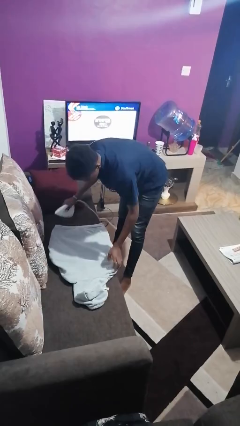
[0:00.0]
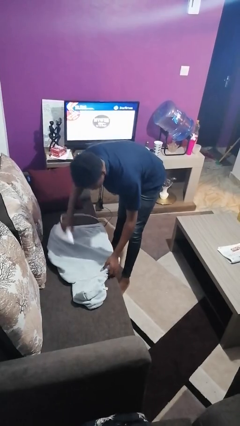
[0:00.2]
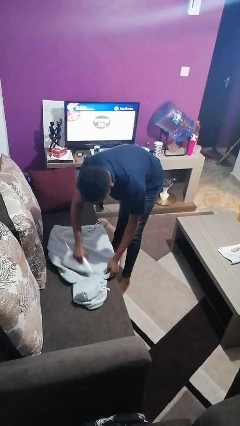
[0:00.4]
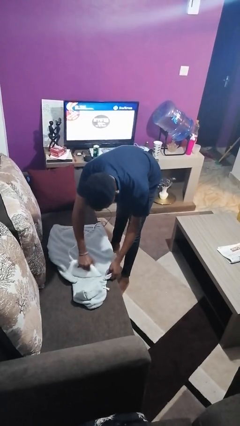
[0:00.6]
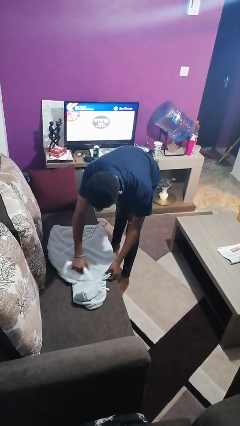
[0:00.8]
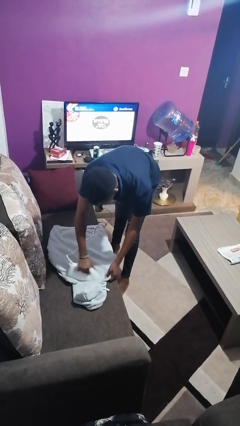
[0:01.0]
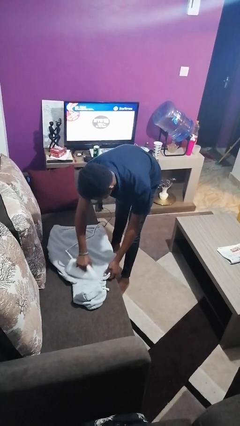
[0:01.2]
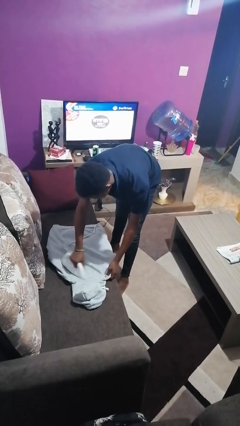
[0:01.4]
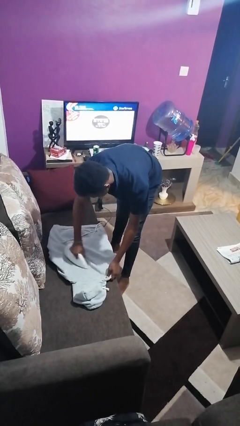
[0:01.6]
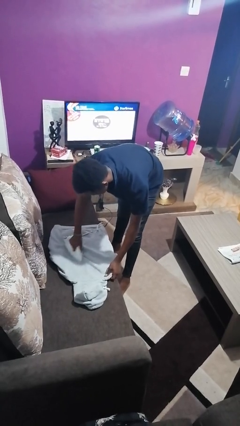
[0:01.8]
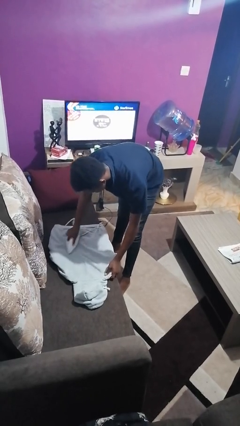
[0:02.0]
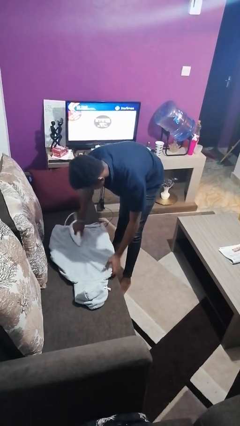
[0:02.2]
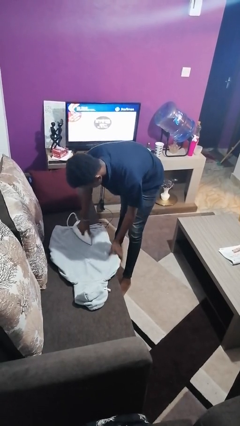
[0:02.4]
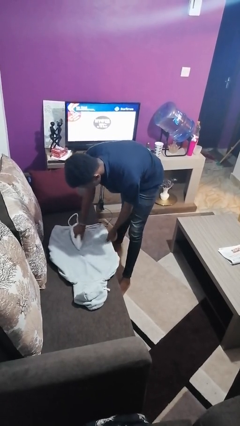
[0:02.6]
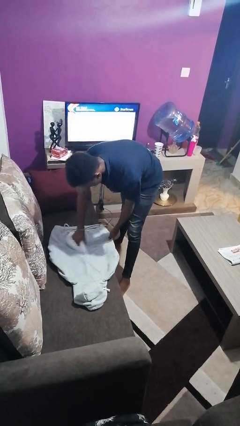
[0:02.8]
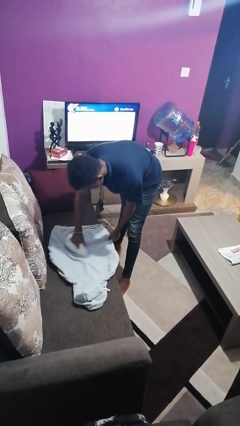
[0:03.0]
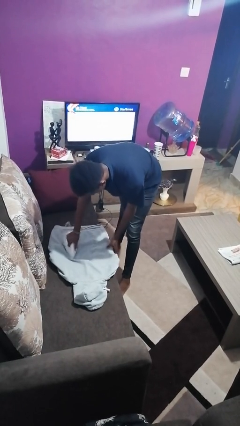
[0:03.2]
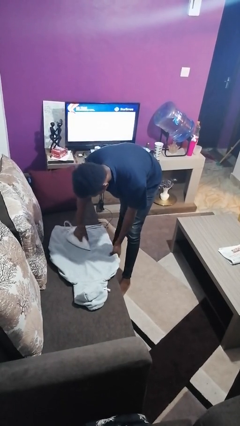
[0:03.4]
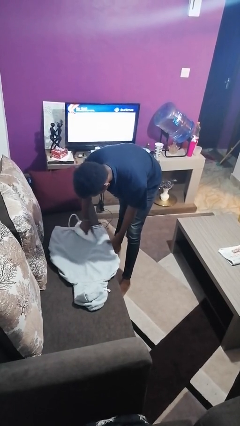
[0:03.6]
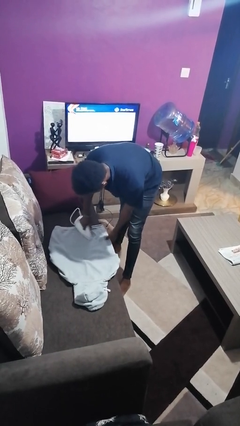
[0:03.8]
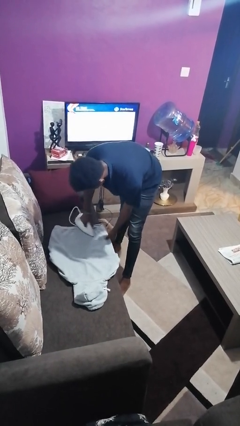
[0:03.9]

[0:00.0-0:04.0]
person irons clothes

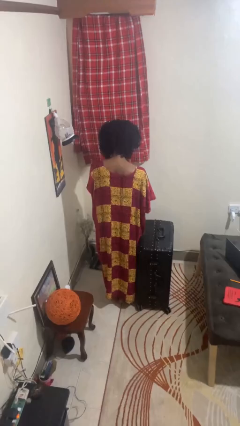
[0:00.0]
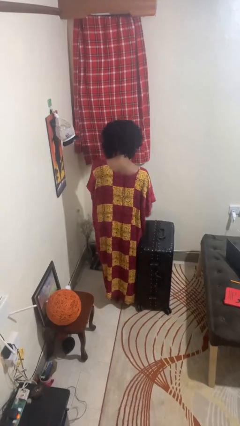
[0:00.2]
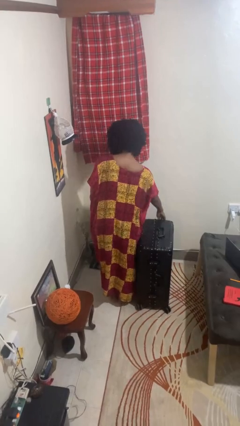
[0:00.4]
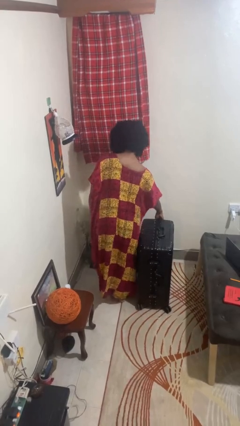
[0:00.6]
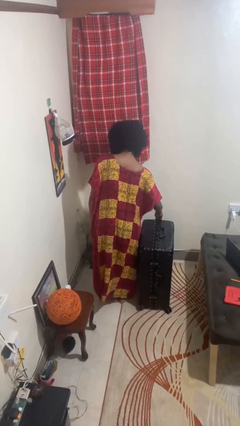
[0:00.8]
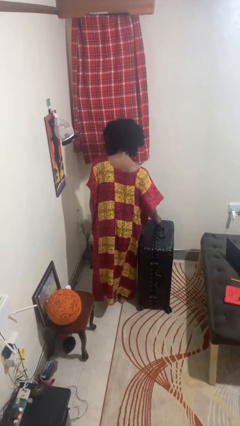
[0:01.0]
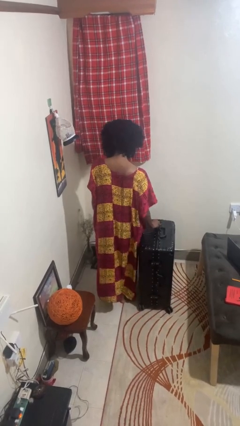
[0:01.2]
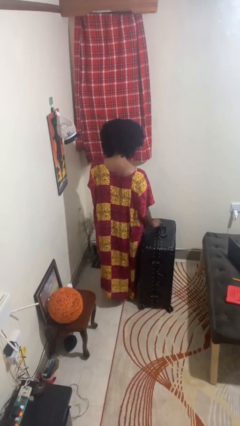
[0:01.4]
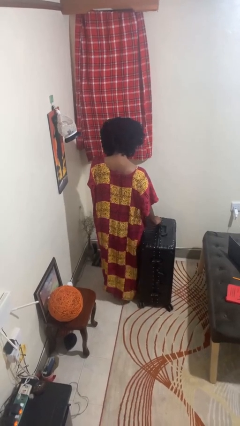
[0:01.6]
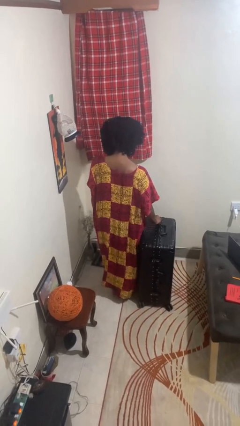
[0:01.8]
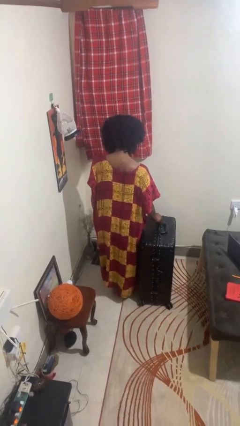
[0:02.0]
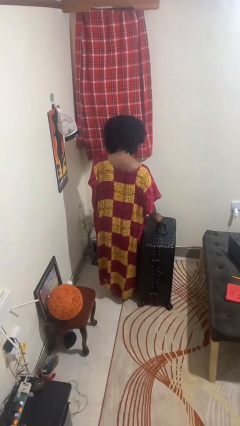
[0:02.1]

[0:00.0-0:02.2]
person opens suitcase

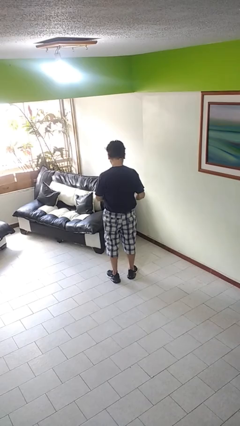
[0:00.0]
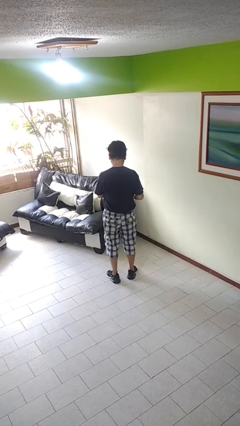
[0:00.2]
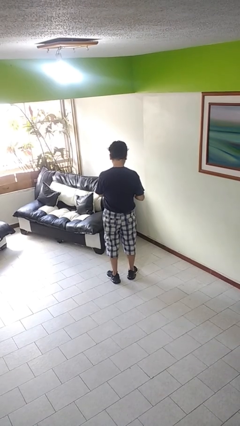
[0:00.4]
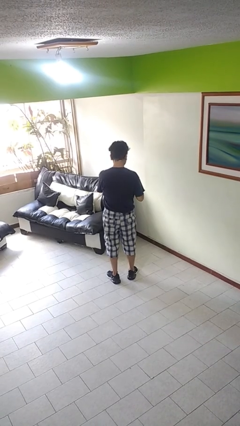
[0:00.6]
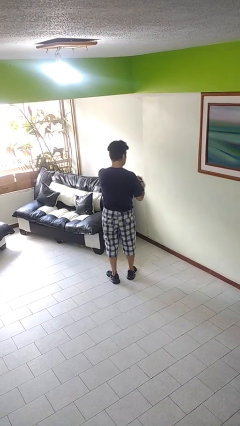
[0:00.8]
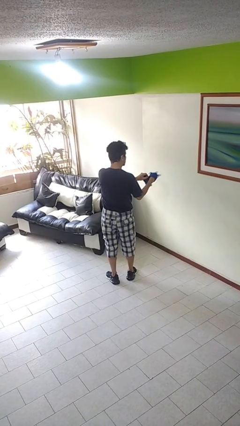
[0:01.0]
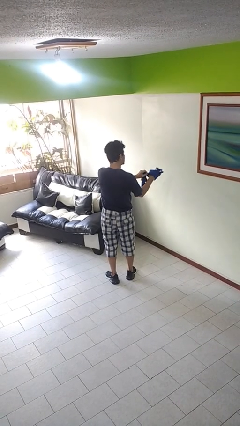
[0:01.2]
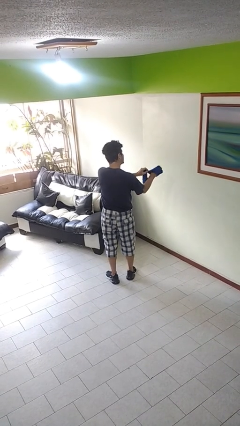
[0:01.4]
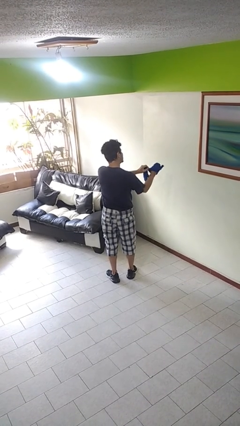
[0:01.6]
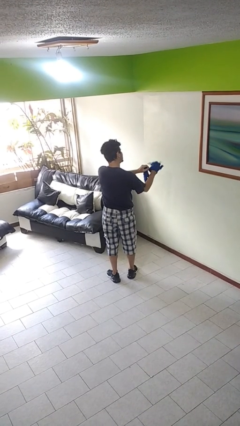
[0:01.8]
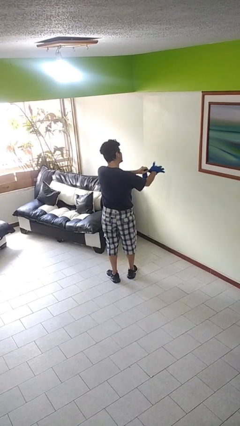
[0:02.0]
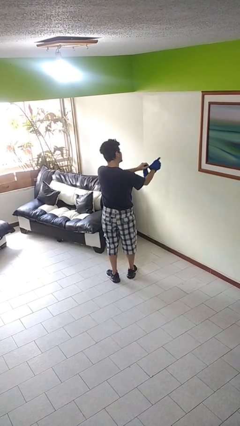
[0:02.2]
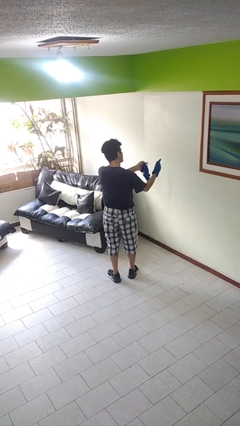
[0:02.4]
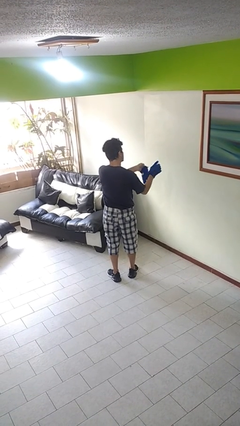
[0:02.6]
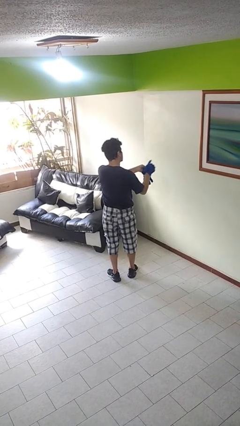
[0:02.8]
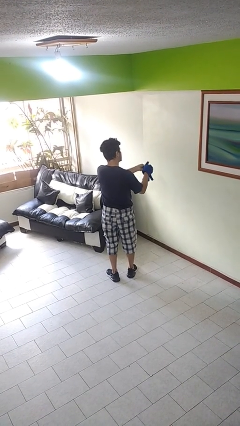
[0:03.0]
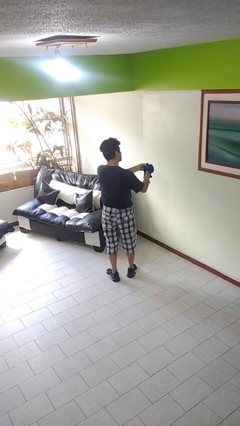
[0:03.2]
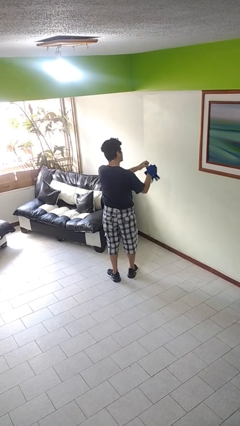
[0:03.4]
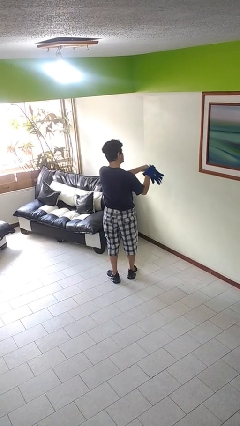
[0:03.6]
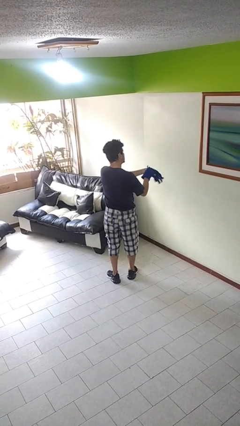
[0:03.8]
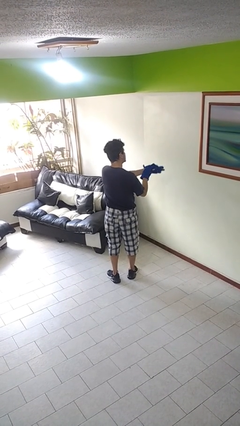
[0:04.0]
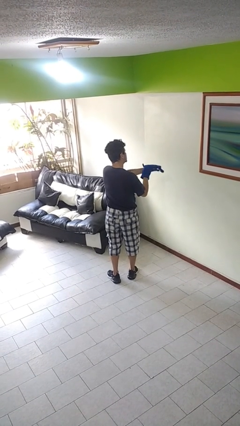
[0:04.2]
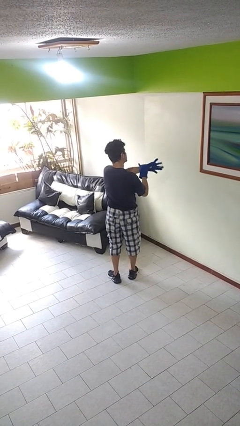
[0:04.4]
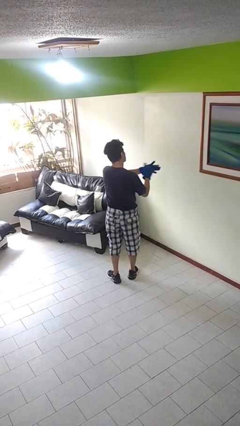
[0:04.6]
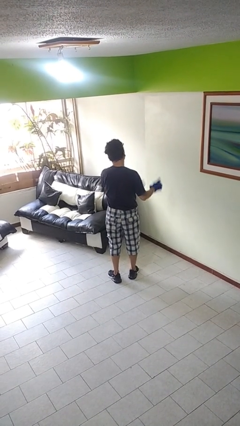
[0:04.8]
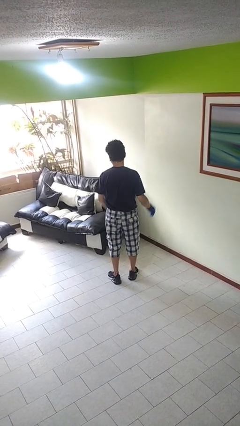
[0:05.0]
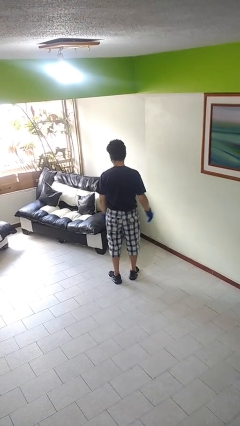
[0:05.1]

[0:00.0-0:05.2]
person puts on gloves

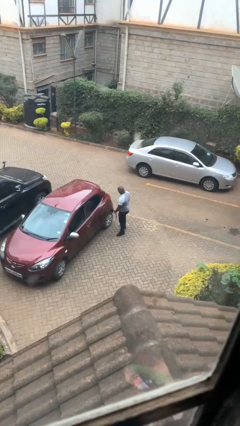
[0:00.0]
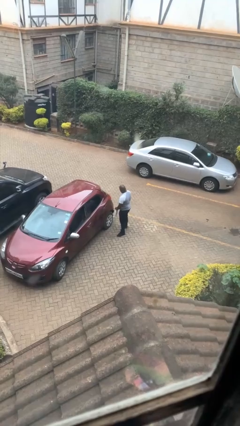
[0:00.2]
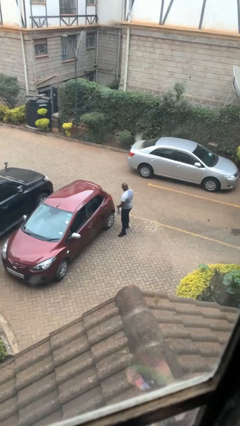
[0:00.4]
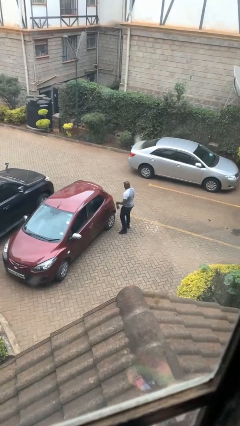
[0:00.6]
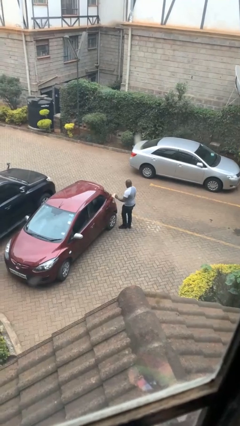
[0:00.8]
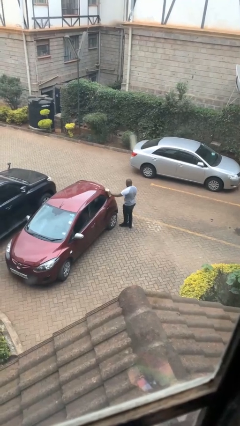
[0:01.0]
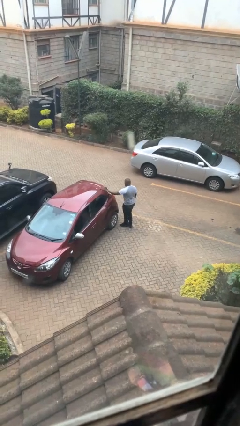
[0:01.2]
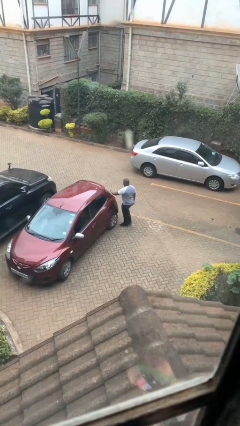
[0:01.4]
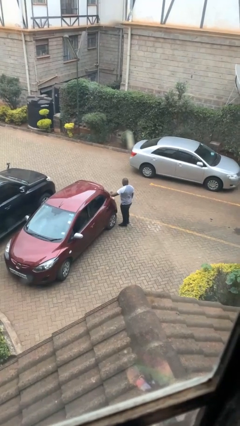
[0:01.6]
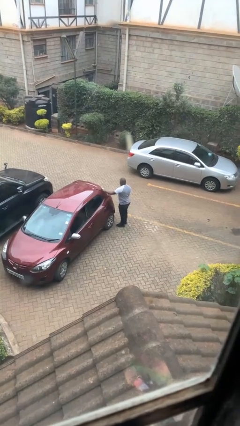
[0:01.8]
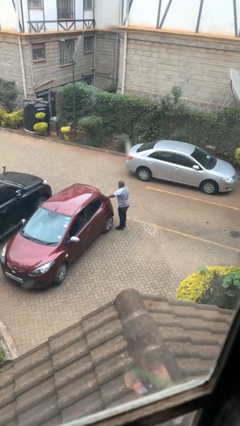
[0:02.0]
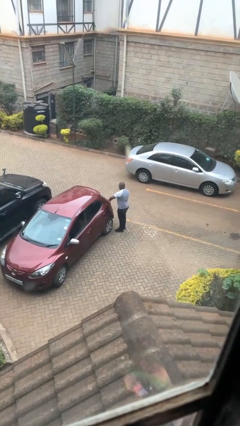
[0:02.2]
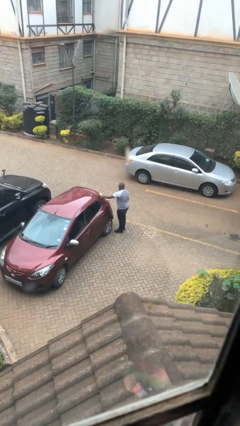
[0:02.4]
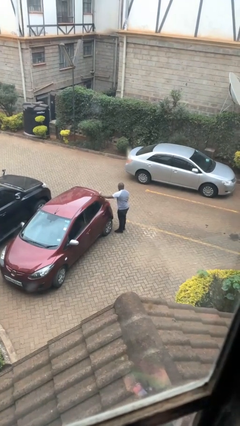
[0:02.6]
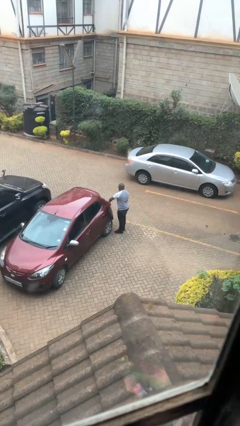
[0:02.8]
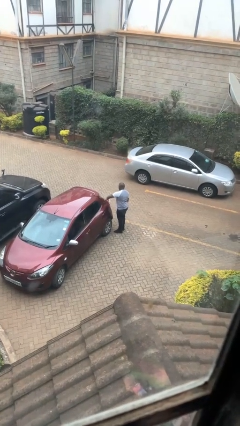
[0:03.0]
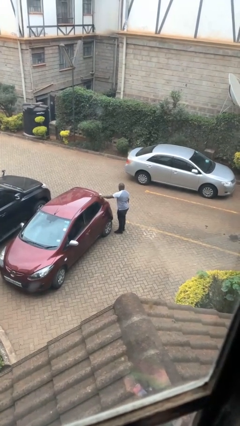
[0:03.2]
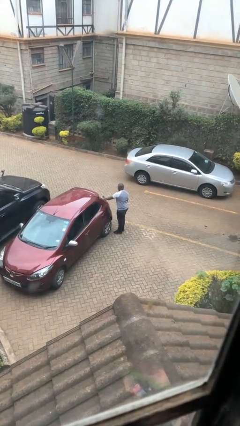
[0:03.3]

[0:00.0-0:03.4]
person polishes car with rag

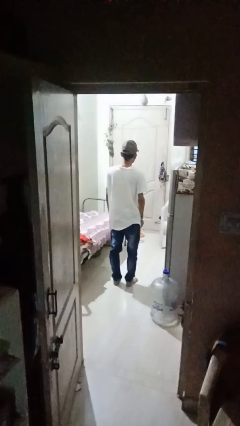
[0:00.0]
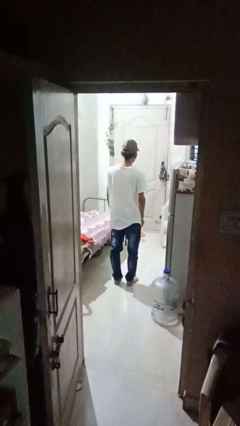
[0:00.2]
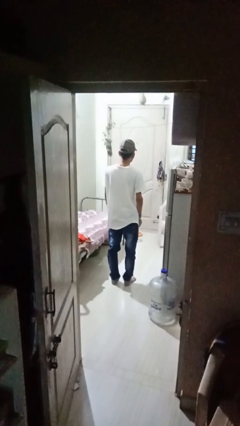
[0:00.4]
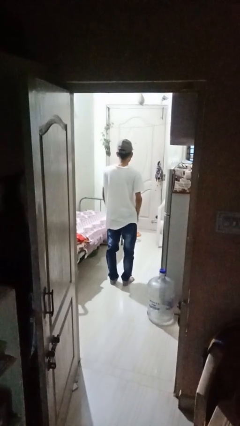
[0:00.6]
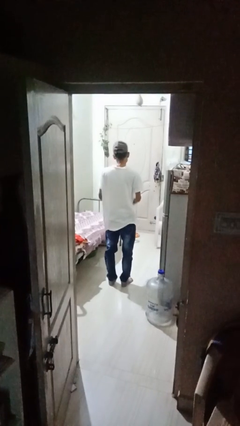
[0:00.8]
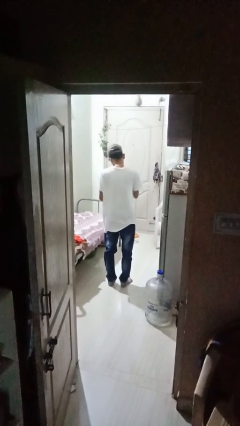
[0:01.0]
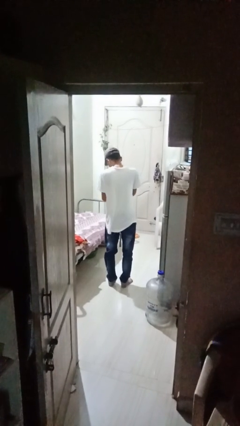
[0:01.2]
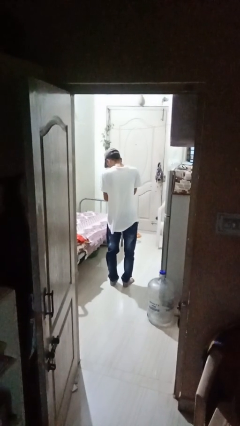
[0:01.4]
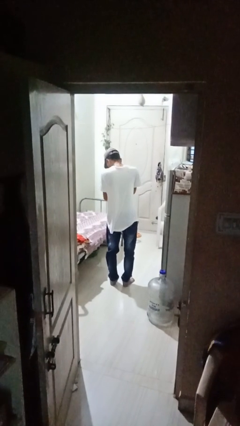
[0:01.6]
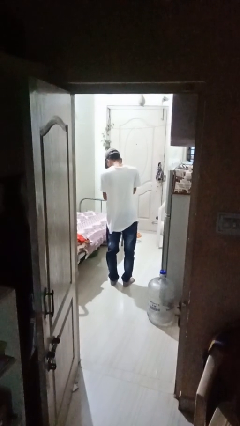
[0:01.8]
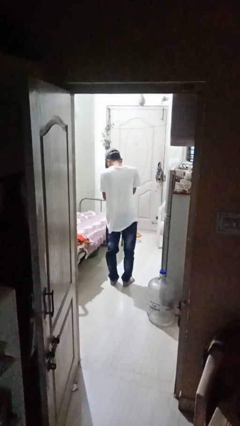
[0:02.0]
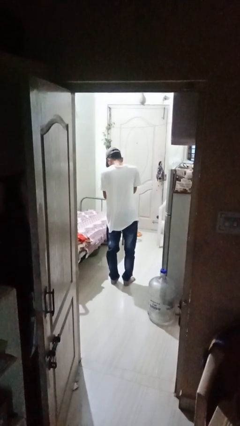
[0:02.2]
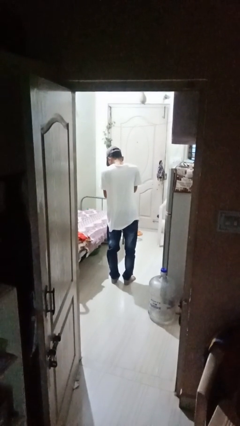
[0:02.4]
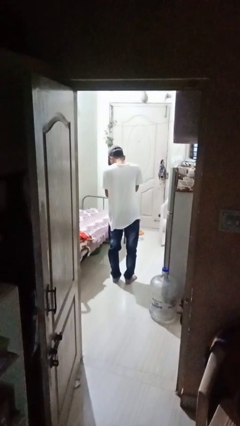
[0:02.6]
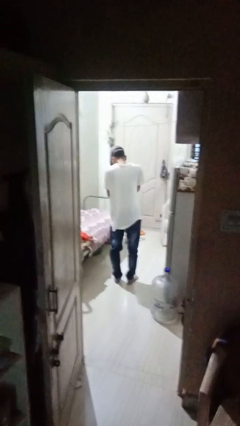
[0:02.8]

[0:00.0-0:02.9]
person prays
